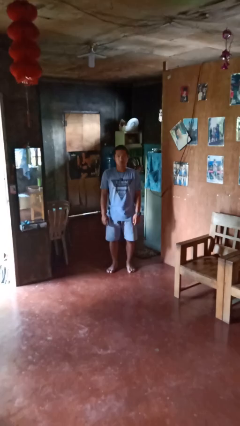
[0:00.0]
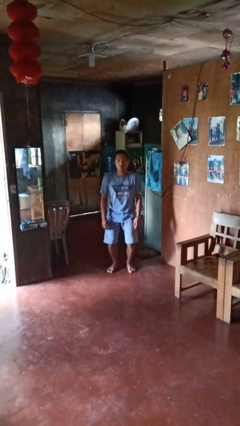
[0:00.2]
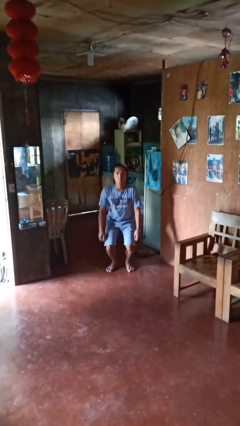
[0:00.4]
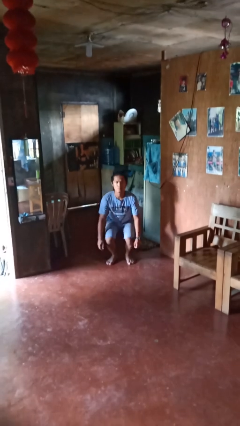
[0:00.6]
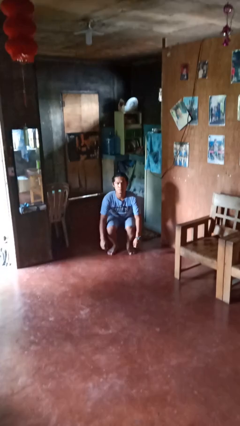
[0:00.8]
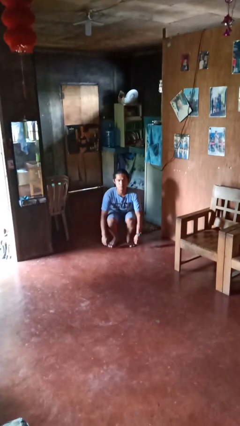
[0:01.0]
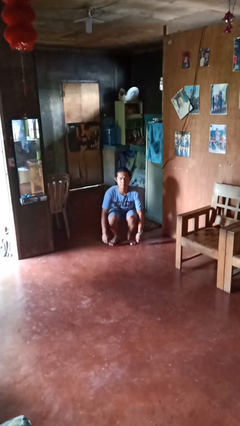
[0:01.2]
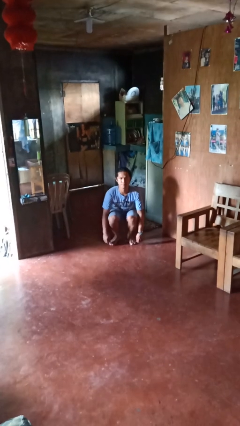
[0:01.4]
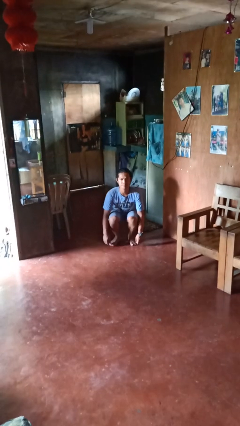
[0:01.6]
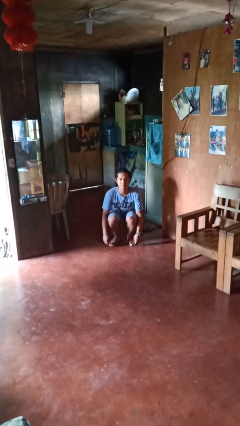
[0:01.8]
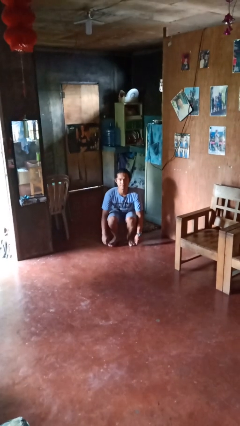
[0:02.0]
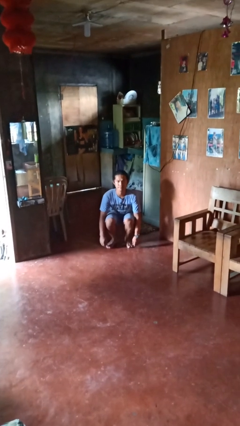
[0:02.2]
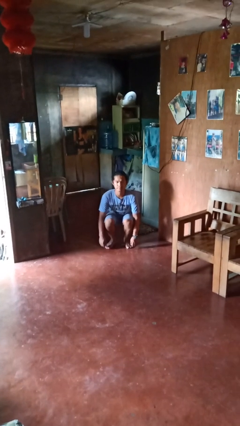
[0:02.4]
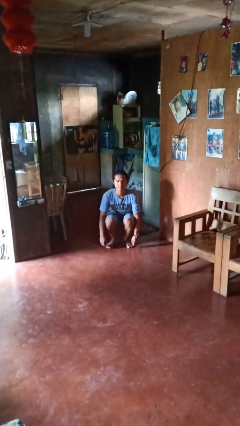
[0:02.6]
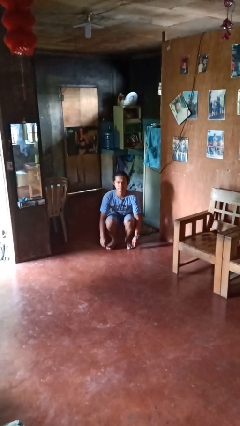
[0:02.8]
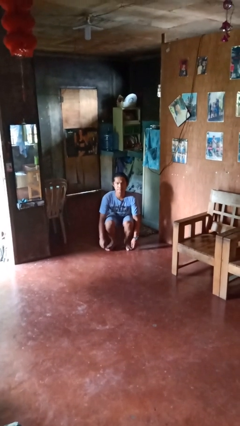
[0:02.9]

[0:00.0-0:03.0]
person squats

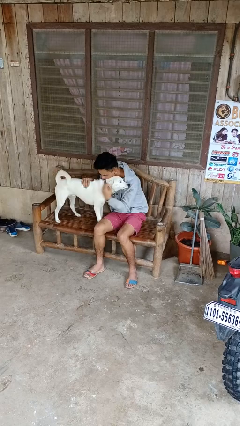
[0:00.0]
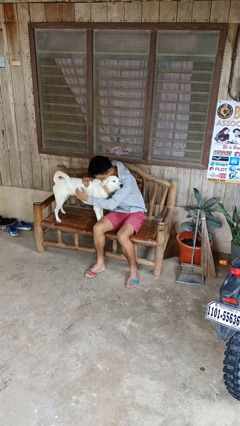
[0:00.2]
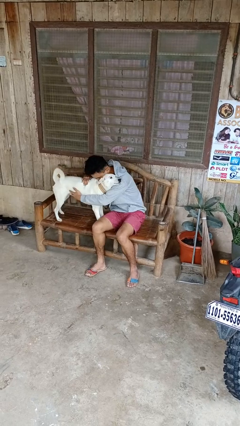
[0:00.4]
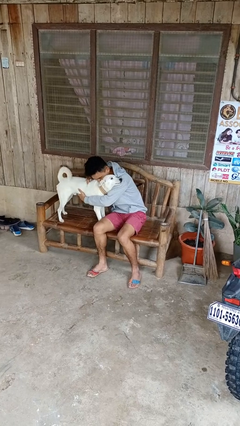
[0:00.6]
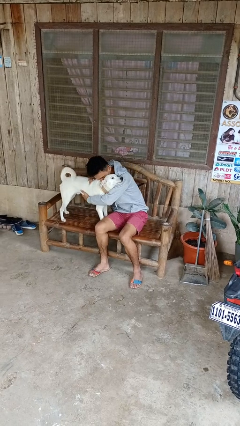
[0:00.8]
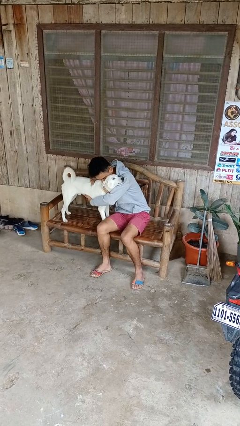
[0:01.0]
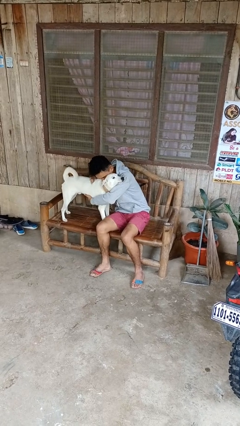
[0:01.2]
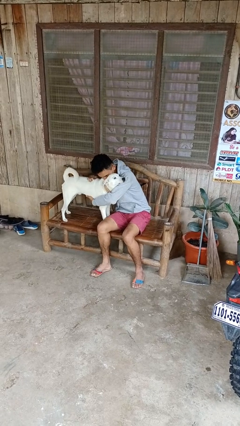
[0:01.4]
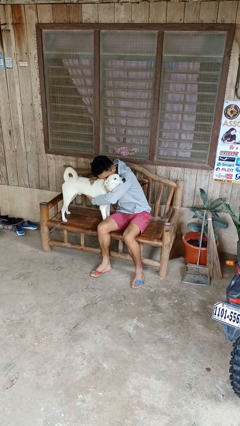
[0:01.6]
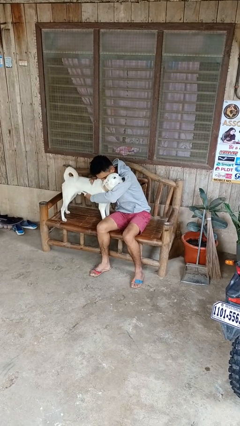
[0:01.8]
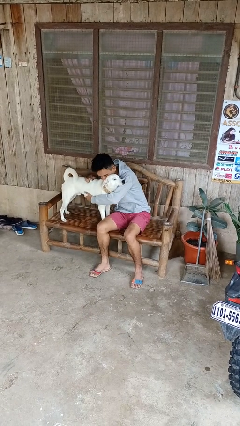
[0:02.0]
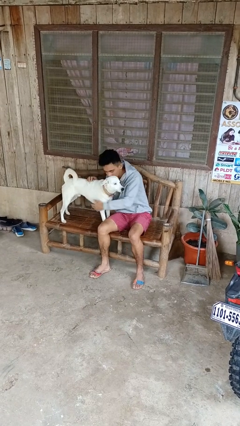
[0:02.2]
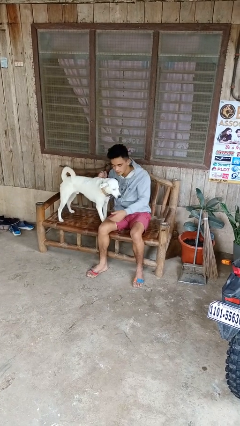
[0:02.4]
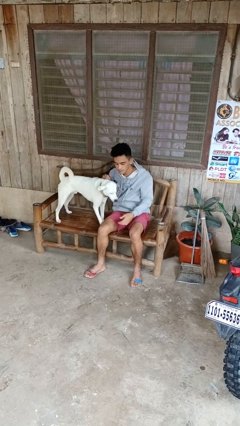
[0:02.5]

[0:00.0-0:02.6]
person hugs dog

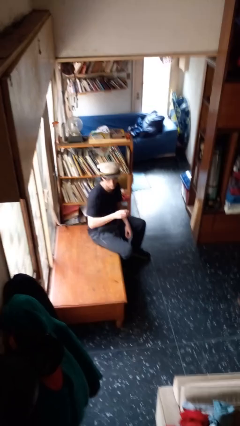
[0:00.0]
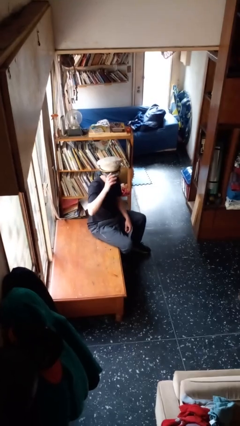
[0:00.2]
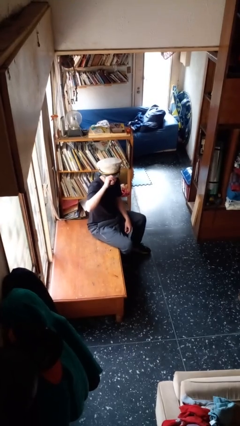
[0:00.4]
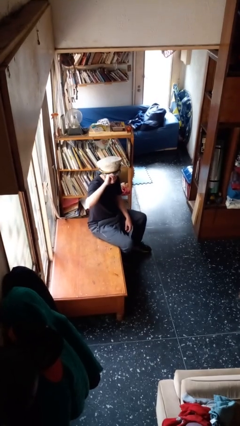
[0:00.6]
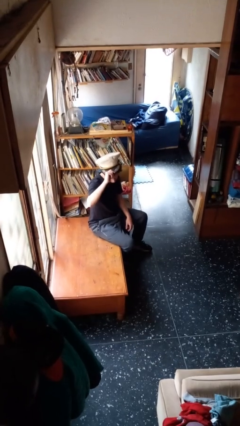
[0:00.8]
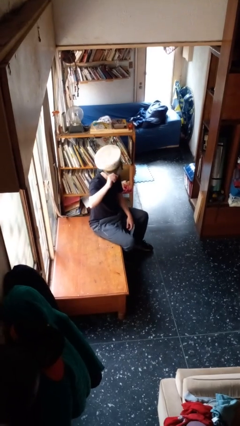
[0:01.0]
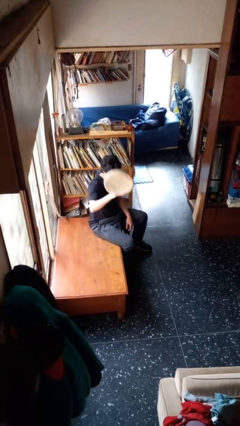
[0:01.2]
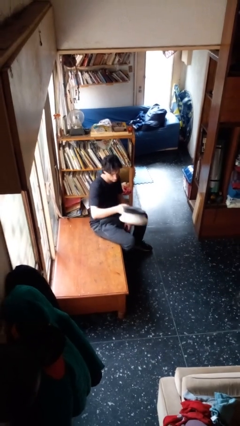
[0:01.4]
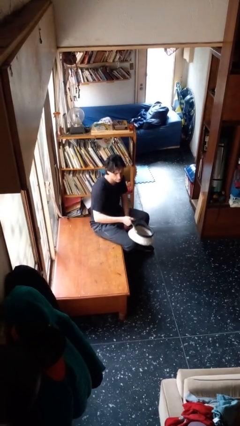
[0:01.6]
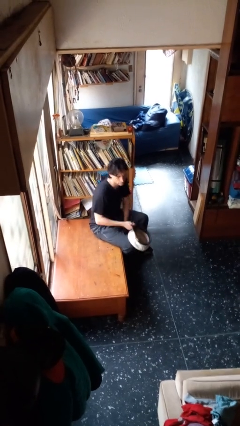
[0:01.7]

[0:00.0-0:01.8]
person takes off hat

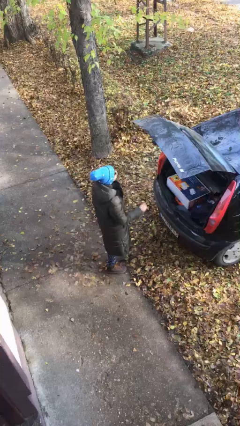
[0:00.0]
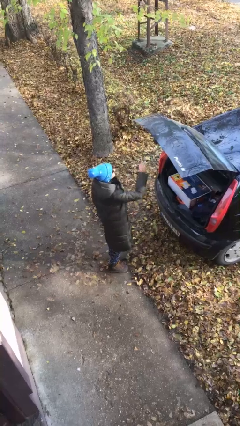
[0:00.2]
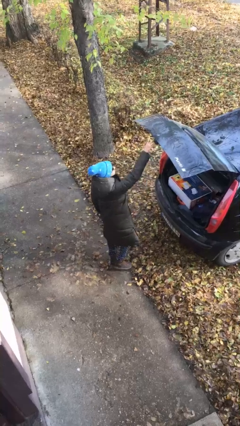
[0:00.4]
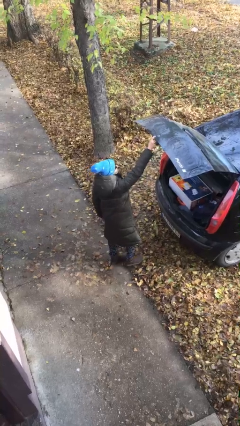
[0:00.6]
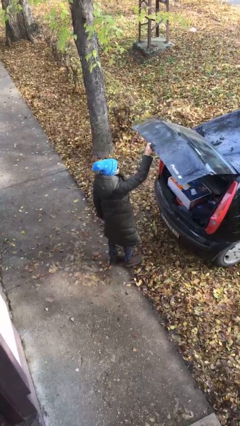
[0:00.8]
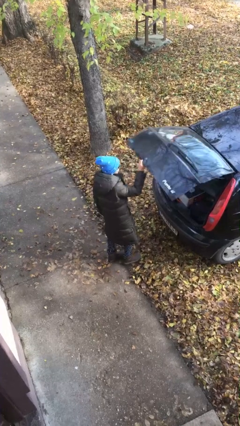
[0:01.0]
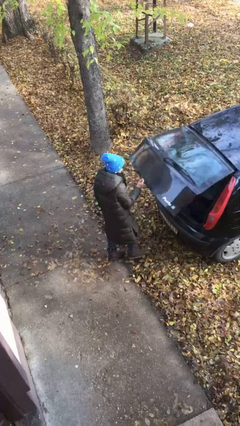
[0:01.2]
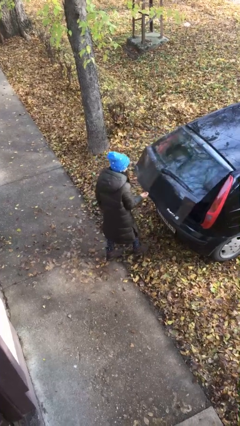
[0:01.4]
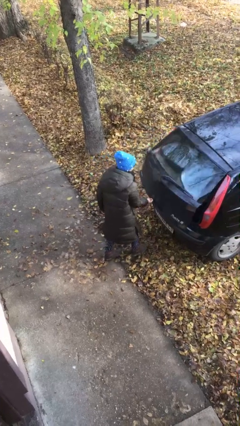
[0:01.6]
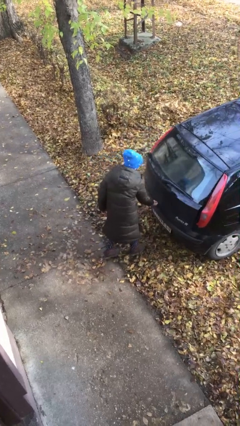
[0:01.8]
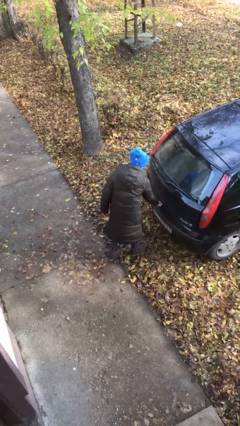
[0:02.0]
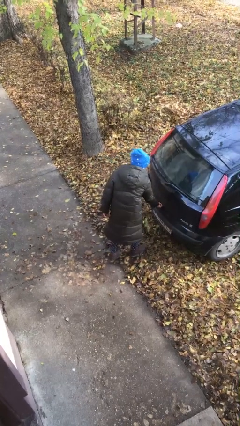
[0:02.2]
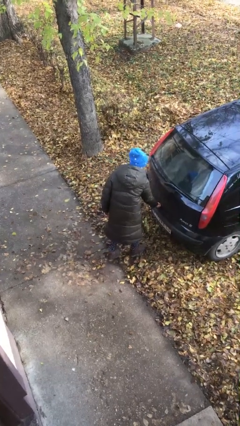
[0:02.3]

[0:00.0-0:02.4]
person closes car trunk

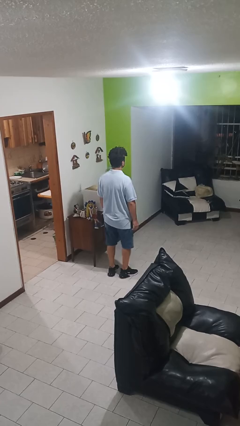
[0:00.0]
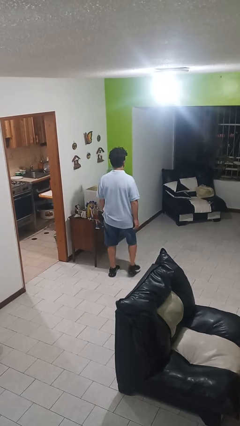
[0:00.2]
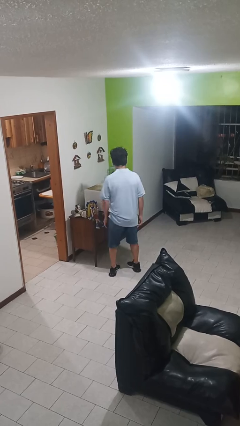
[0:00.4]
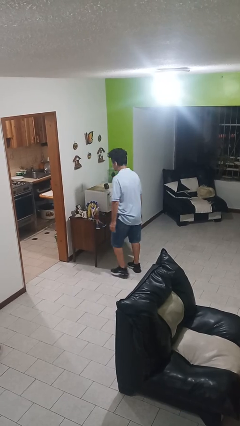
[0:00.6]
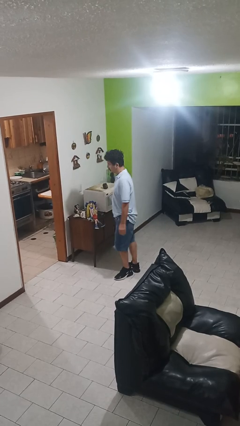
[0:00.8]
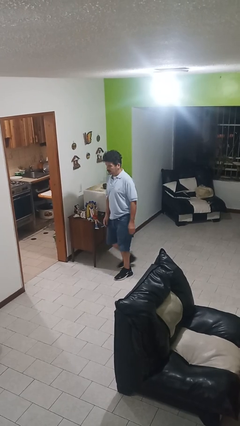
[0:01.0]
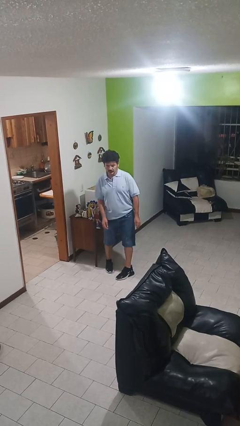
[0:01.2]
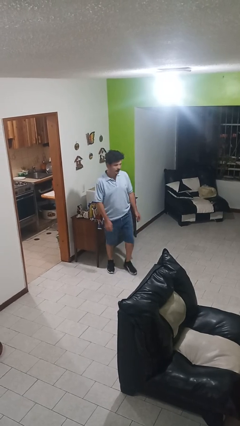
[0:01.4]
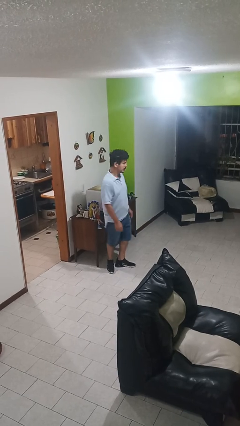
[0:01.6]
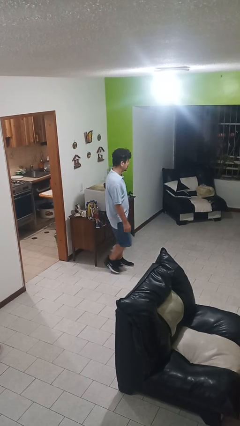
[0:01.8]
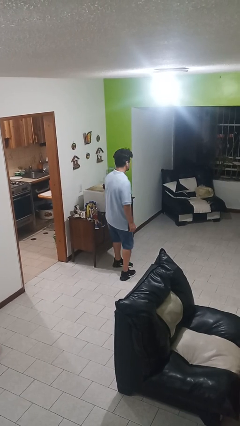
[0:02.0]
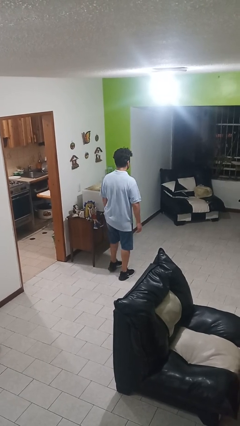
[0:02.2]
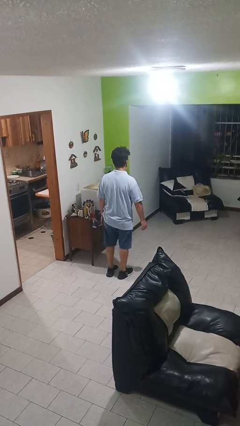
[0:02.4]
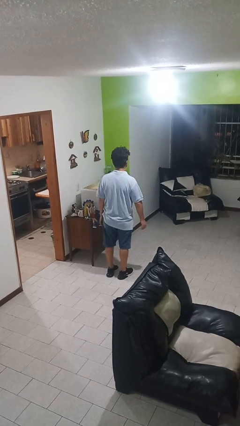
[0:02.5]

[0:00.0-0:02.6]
person twirls

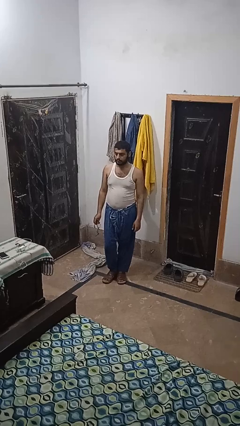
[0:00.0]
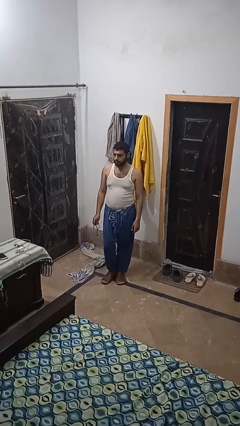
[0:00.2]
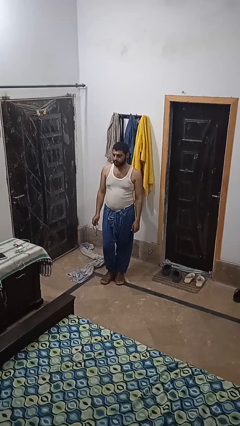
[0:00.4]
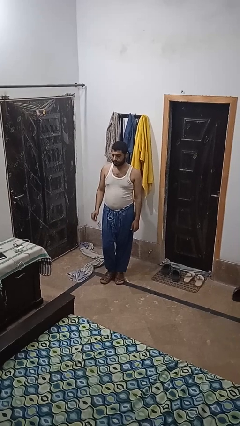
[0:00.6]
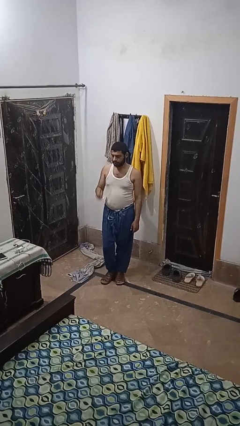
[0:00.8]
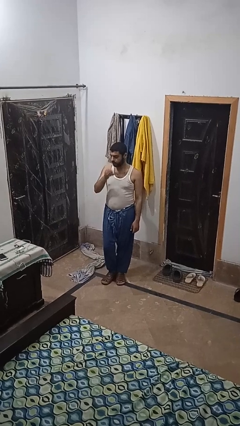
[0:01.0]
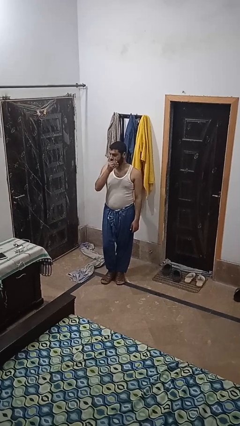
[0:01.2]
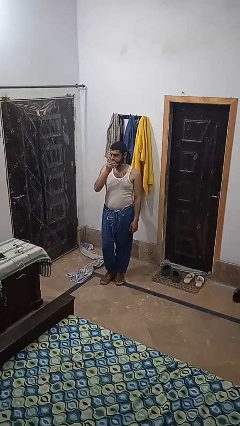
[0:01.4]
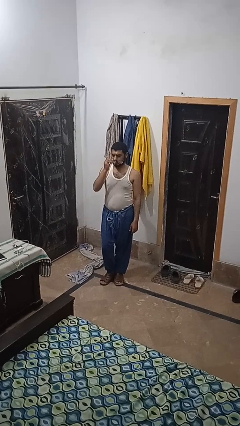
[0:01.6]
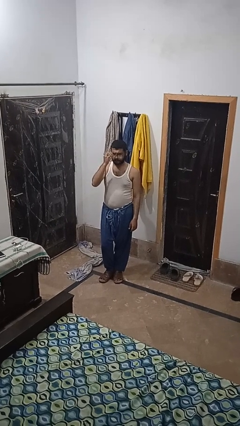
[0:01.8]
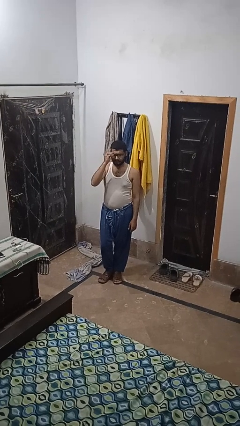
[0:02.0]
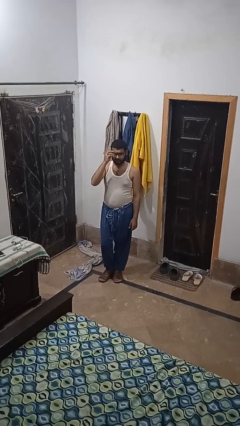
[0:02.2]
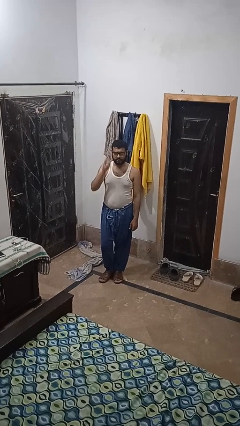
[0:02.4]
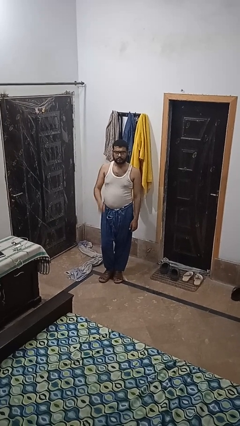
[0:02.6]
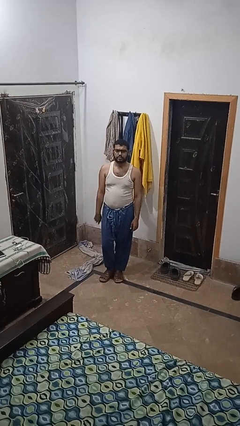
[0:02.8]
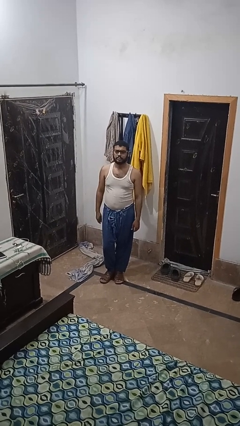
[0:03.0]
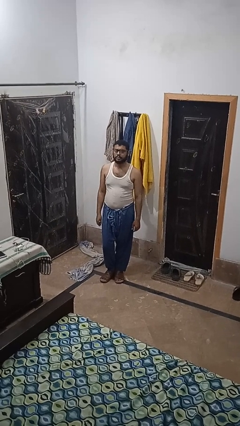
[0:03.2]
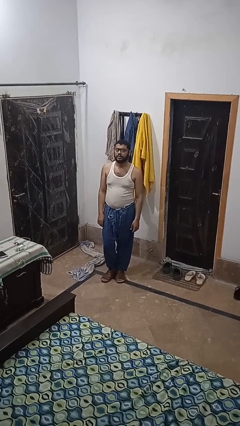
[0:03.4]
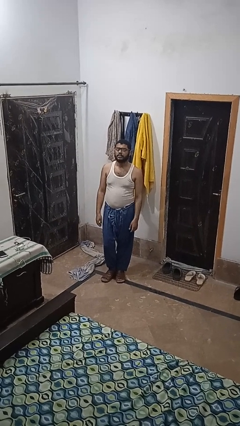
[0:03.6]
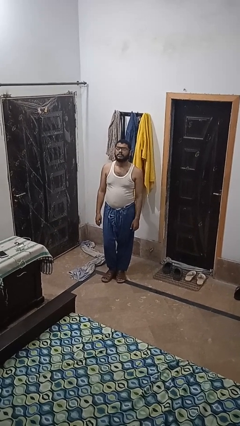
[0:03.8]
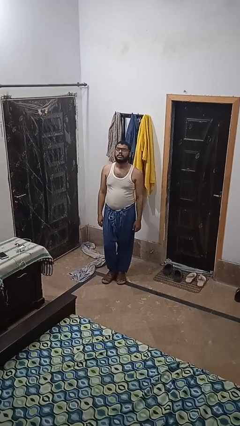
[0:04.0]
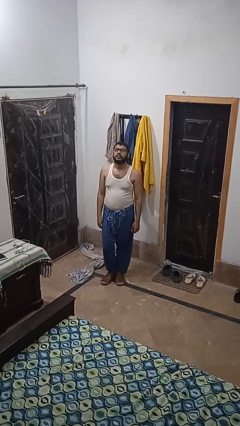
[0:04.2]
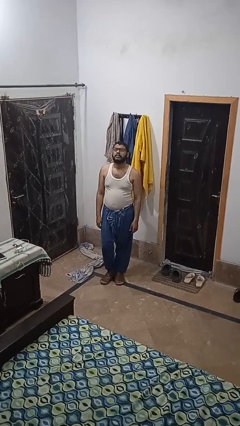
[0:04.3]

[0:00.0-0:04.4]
person puts on glasses

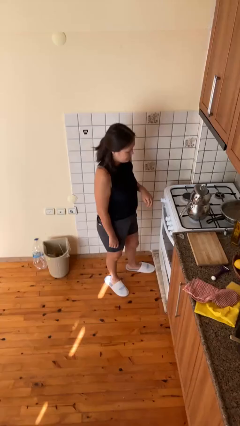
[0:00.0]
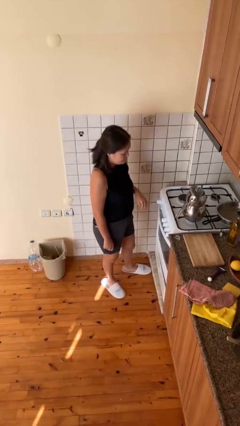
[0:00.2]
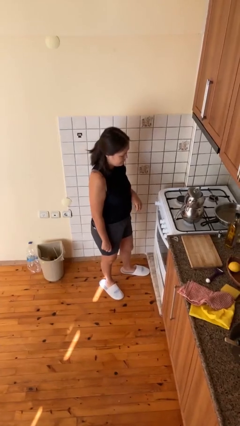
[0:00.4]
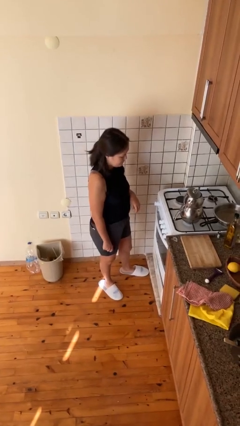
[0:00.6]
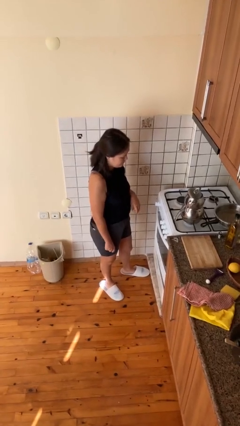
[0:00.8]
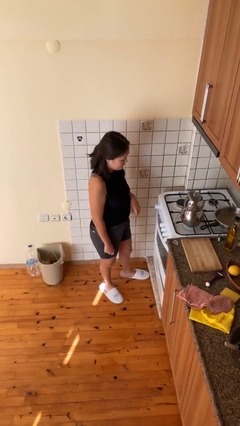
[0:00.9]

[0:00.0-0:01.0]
person burns hand
